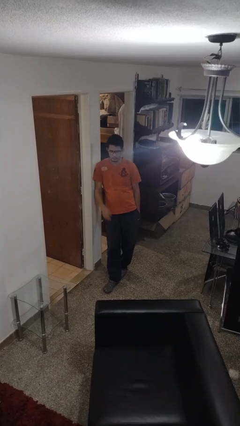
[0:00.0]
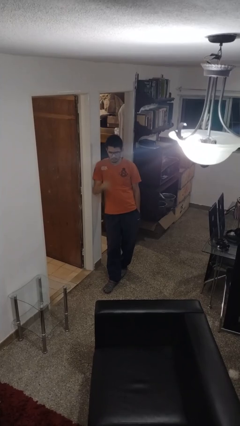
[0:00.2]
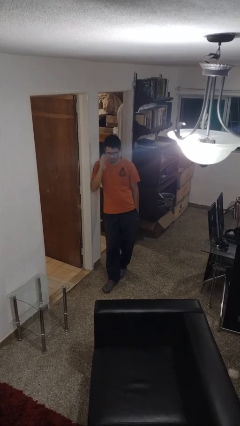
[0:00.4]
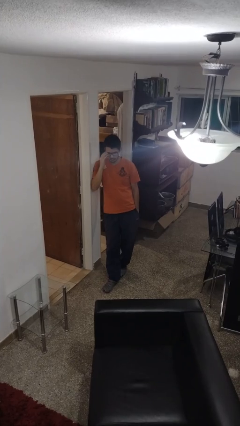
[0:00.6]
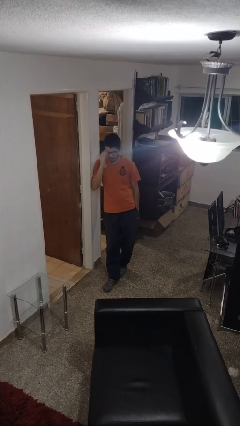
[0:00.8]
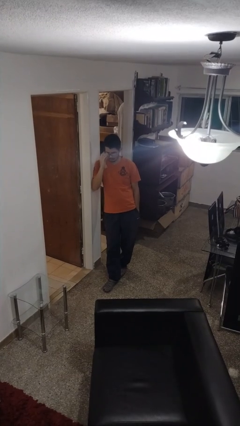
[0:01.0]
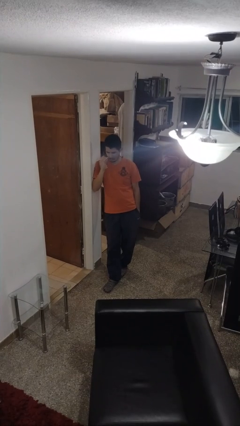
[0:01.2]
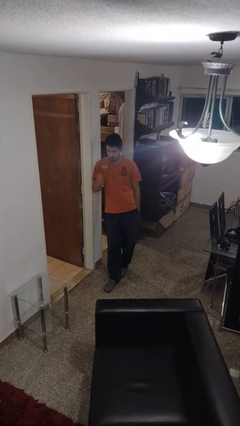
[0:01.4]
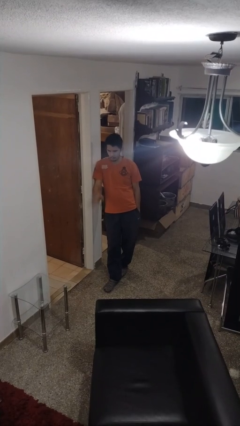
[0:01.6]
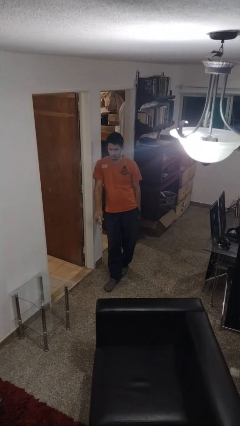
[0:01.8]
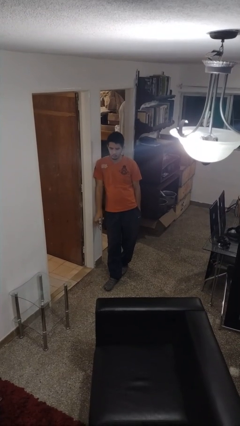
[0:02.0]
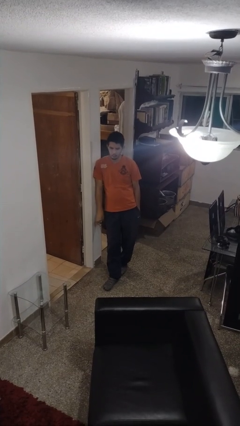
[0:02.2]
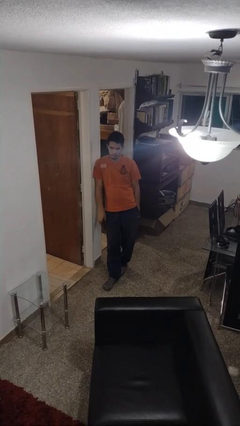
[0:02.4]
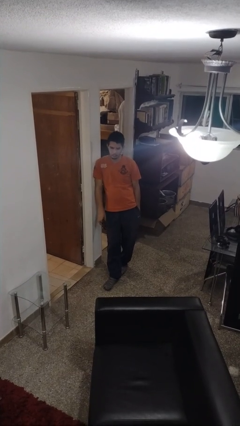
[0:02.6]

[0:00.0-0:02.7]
person takes off glasses

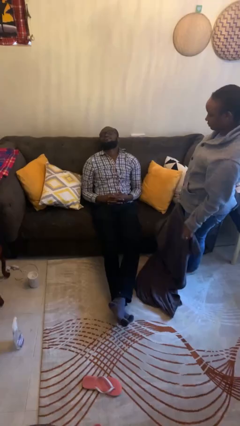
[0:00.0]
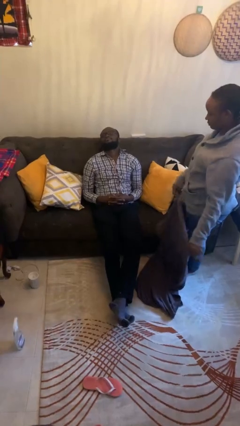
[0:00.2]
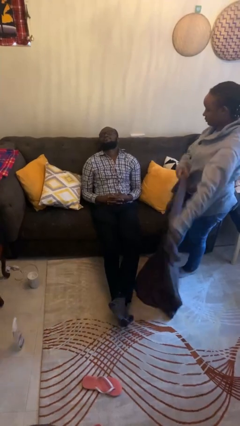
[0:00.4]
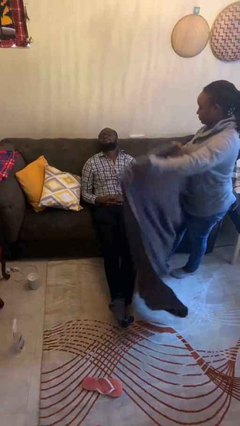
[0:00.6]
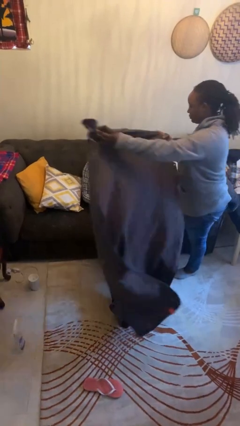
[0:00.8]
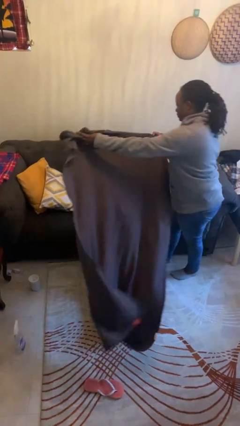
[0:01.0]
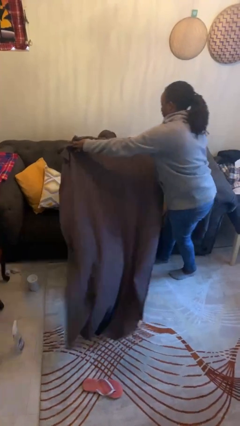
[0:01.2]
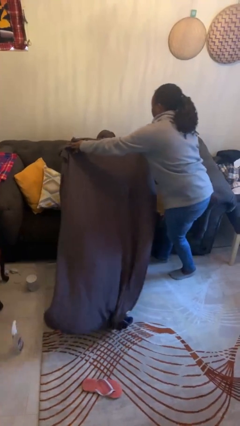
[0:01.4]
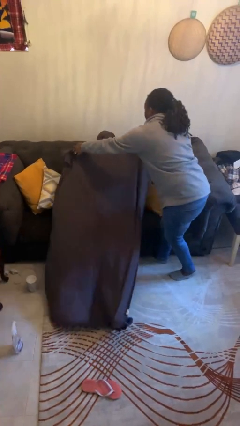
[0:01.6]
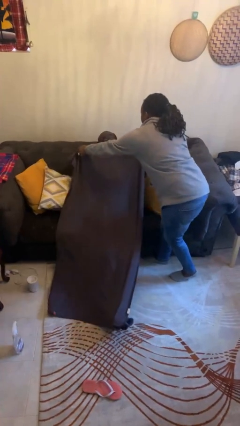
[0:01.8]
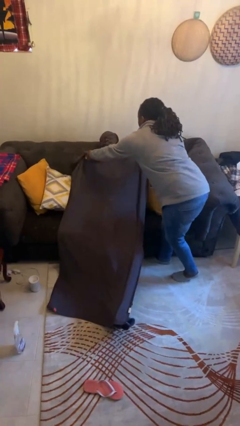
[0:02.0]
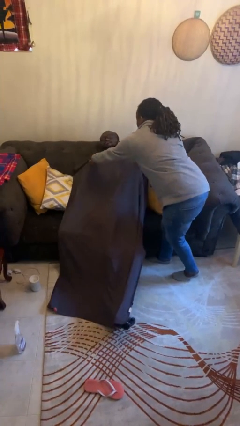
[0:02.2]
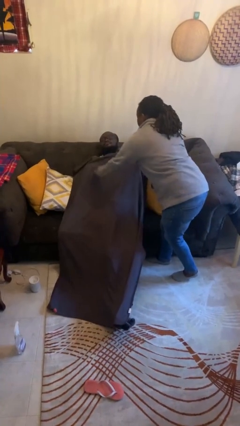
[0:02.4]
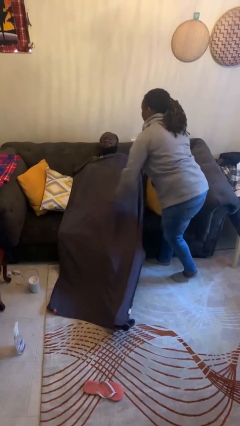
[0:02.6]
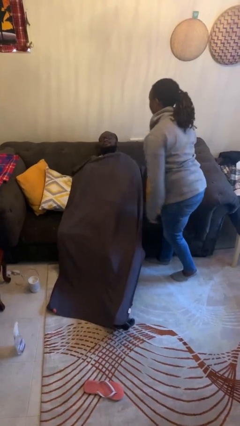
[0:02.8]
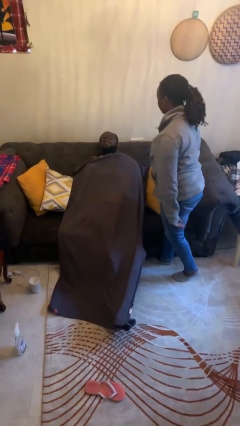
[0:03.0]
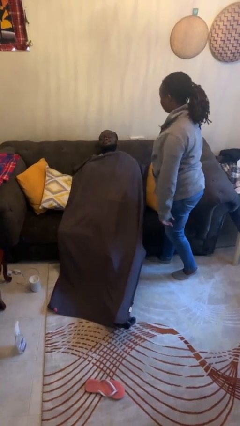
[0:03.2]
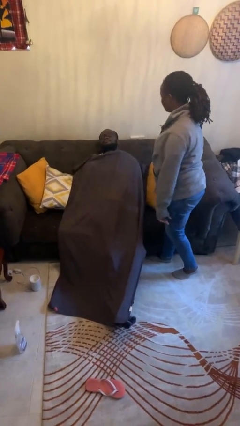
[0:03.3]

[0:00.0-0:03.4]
person covers friend with blanket

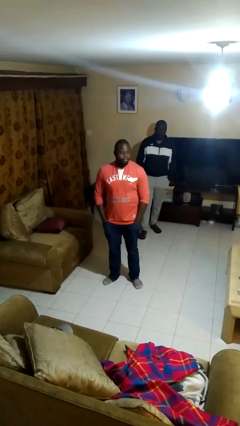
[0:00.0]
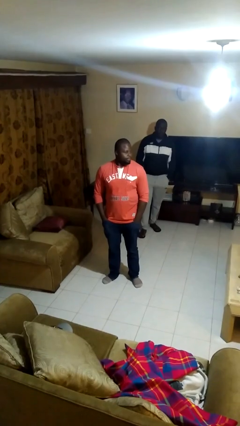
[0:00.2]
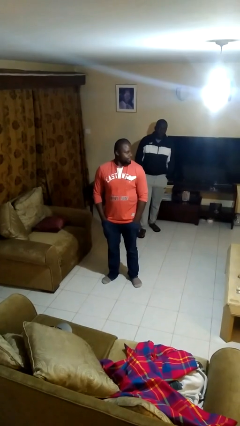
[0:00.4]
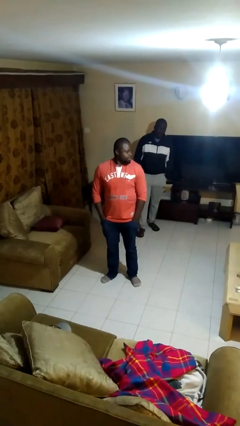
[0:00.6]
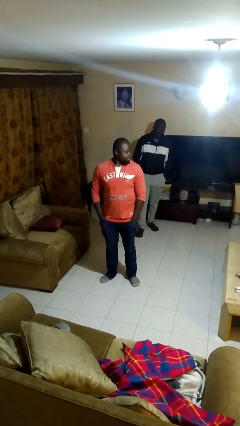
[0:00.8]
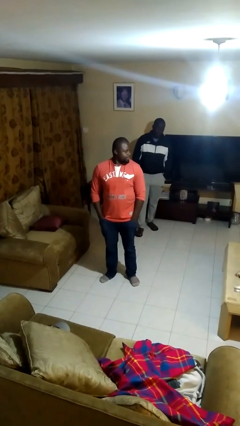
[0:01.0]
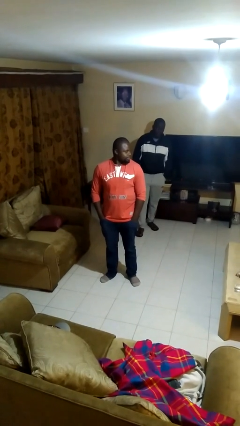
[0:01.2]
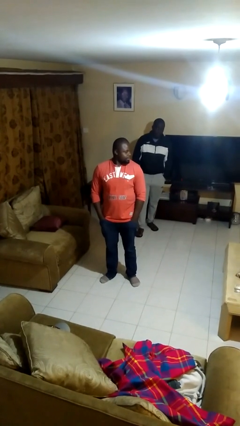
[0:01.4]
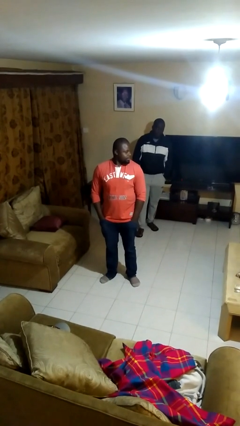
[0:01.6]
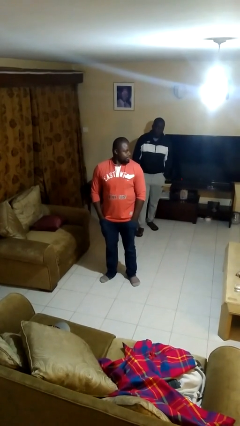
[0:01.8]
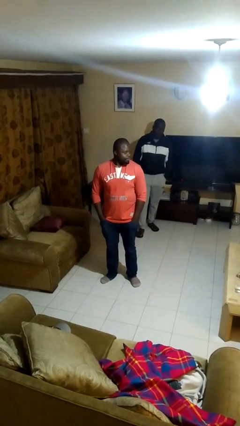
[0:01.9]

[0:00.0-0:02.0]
person looks over shoulder

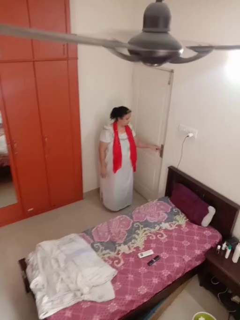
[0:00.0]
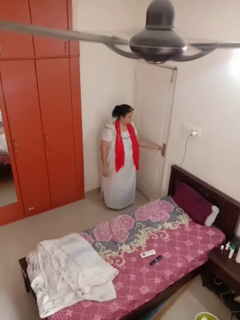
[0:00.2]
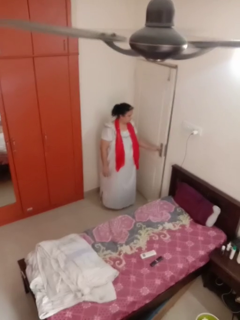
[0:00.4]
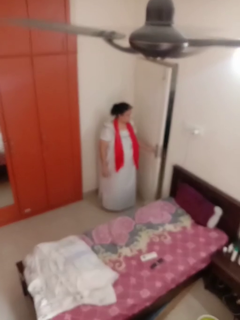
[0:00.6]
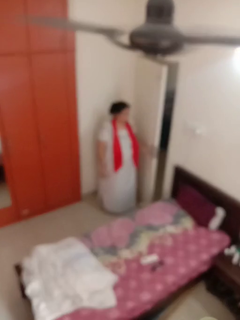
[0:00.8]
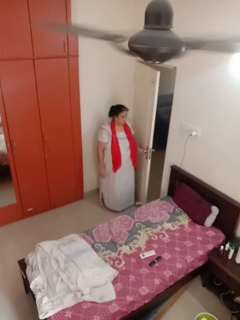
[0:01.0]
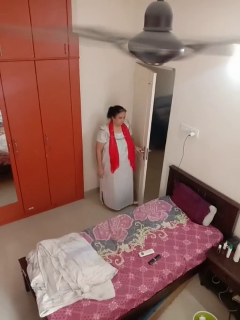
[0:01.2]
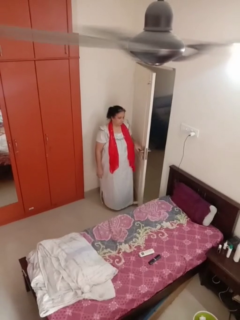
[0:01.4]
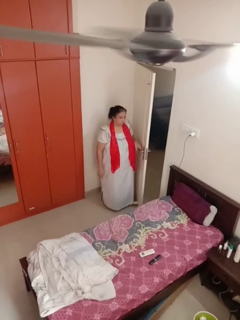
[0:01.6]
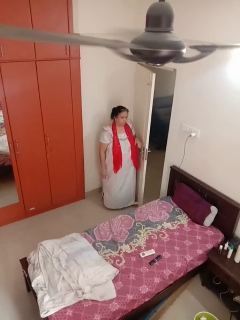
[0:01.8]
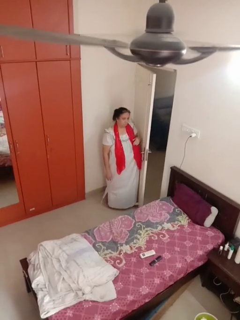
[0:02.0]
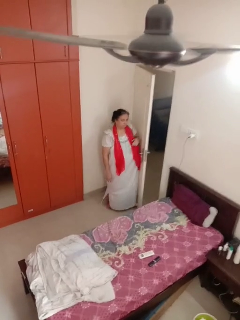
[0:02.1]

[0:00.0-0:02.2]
person opens facility door

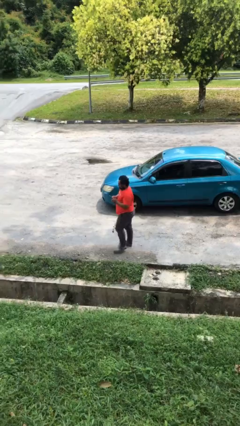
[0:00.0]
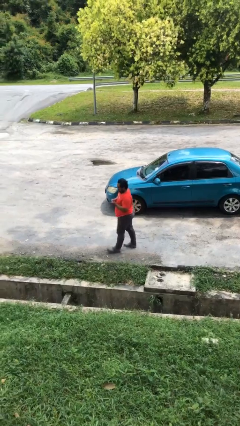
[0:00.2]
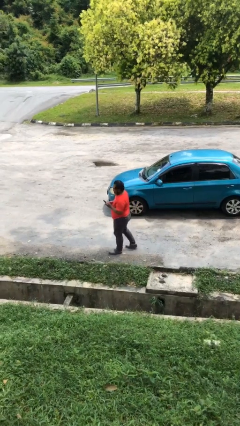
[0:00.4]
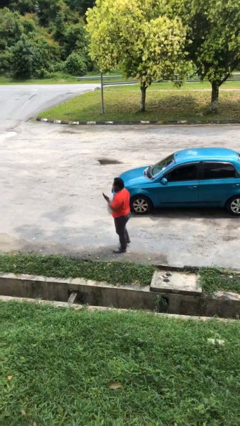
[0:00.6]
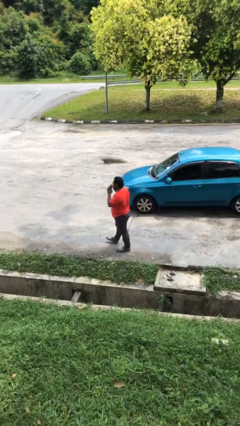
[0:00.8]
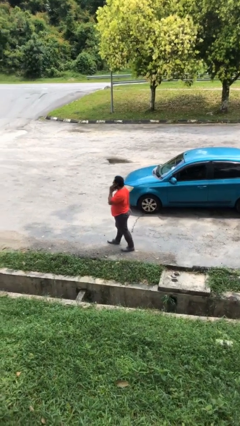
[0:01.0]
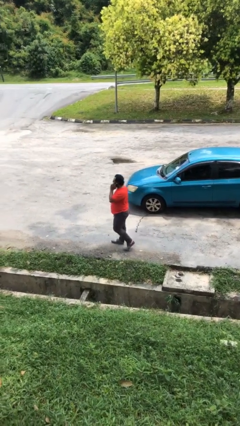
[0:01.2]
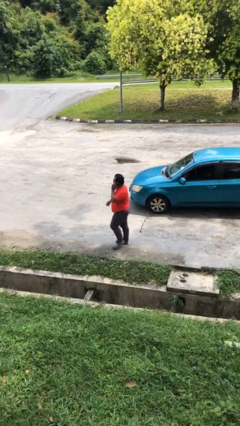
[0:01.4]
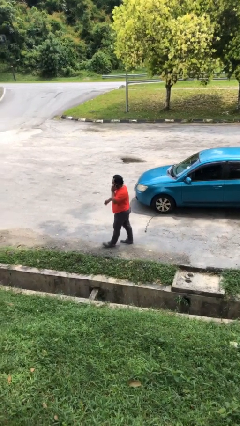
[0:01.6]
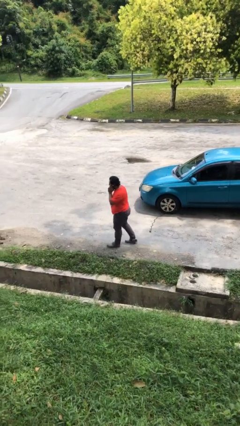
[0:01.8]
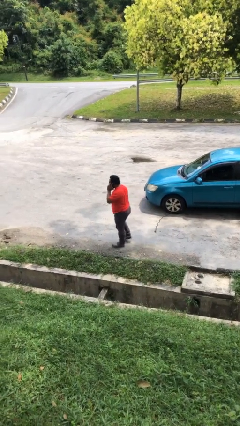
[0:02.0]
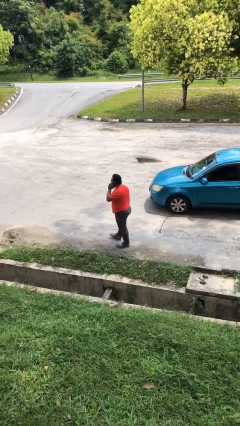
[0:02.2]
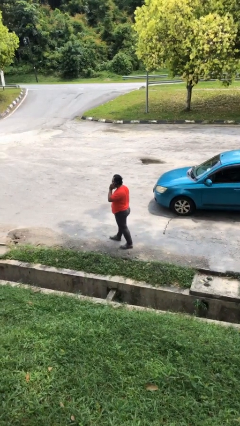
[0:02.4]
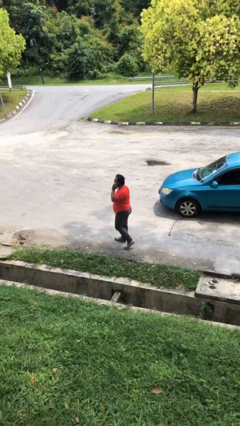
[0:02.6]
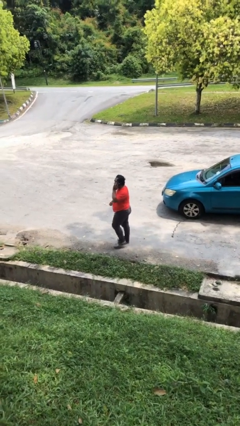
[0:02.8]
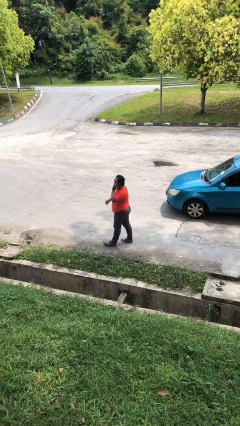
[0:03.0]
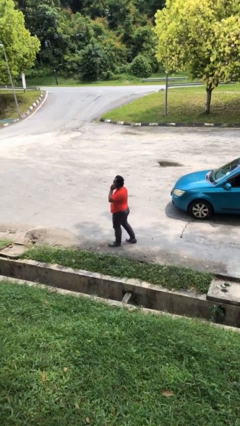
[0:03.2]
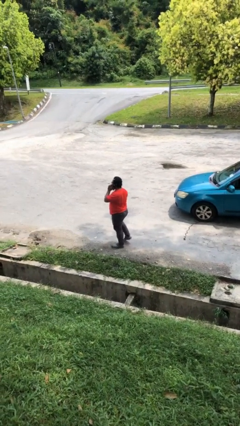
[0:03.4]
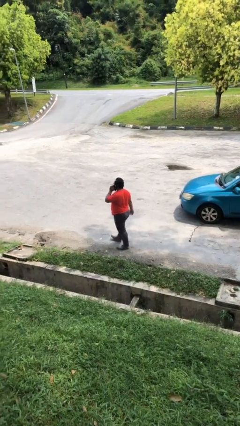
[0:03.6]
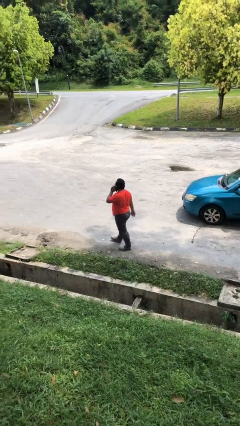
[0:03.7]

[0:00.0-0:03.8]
person talks on phone

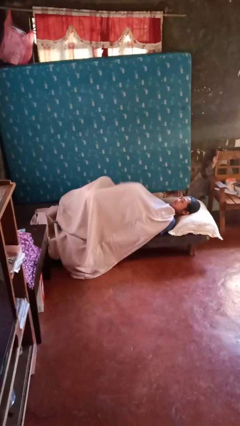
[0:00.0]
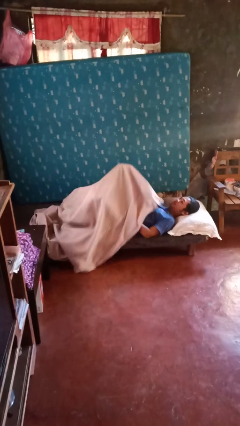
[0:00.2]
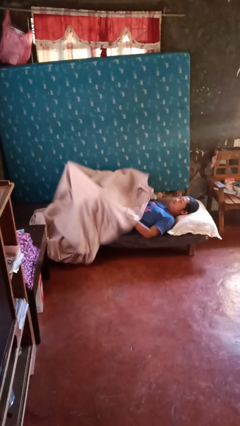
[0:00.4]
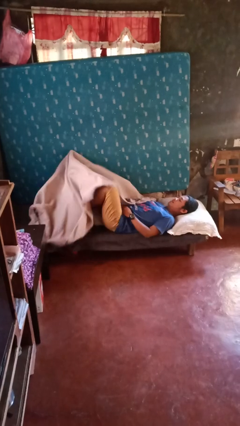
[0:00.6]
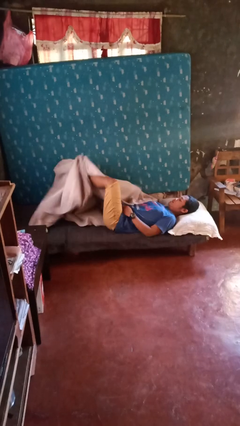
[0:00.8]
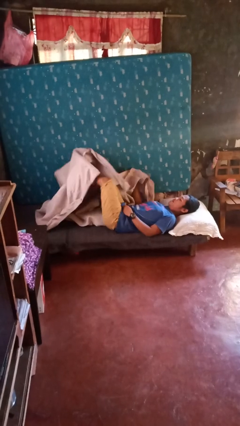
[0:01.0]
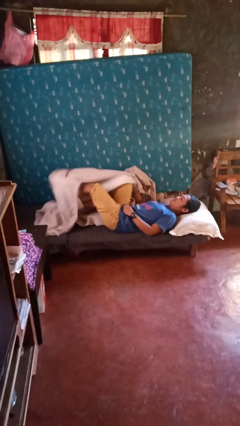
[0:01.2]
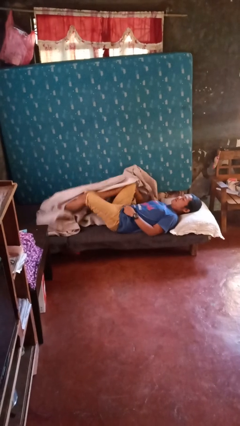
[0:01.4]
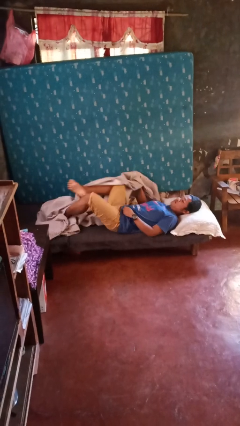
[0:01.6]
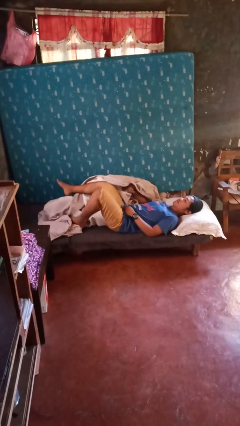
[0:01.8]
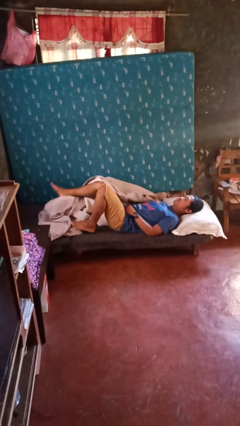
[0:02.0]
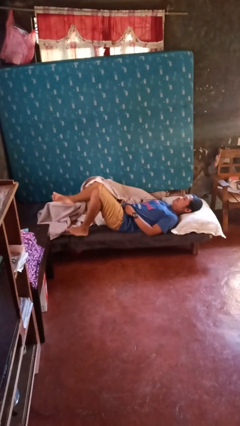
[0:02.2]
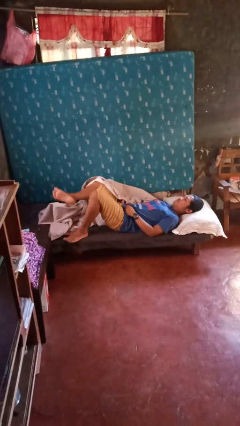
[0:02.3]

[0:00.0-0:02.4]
person uncovers with bedsheets

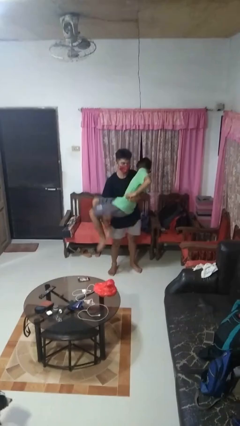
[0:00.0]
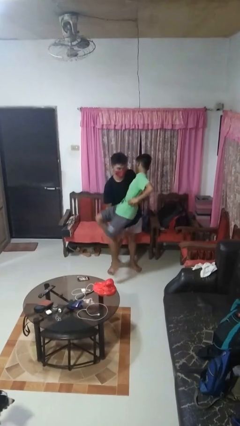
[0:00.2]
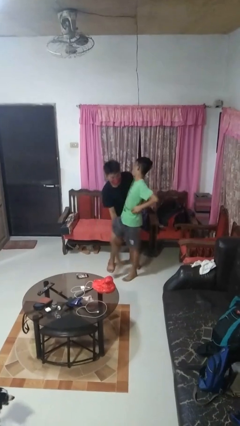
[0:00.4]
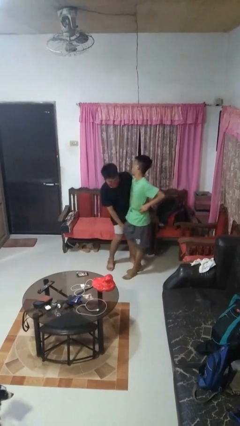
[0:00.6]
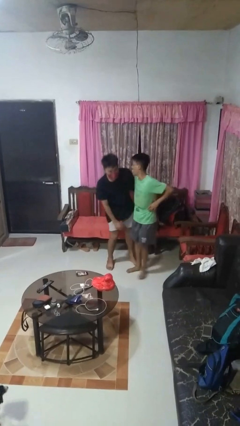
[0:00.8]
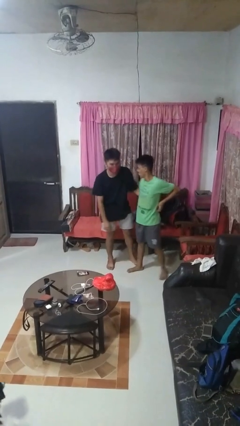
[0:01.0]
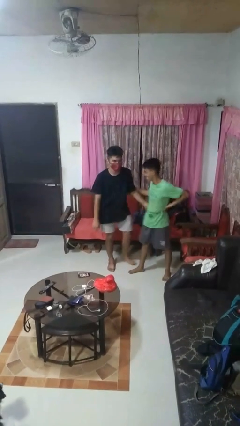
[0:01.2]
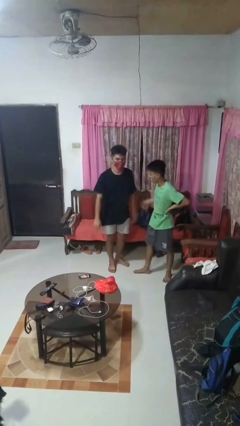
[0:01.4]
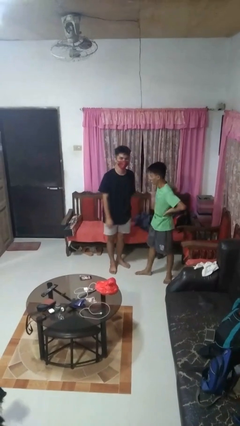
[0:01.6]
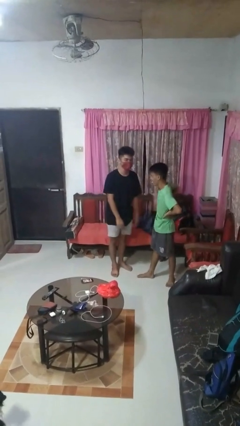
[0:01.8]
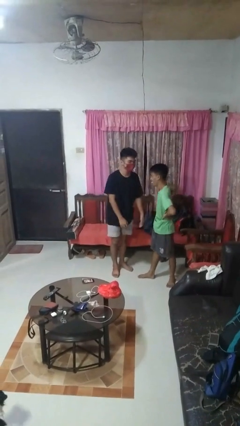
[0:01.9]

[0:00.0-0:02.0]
person puts down person
